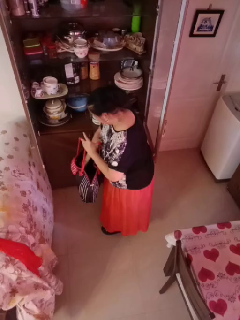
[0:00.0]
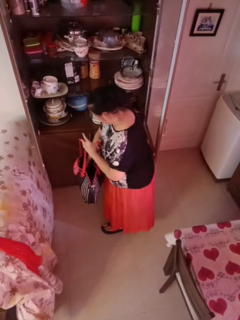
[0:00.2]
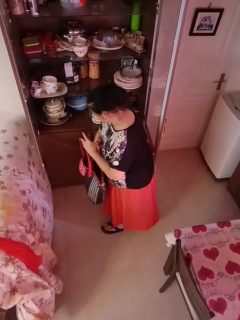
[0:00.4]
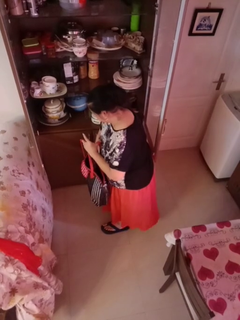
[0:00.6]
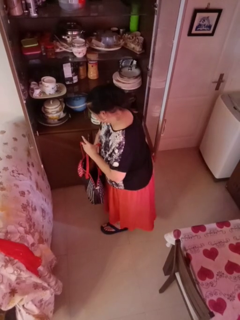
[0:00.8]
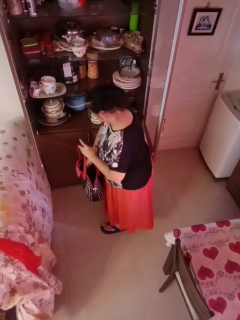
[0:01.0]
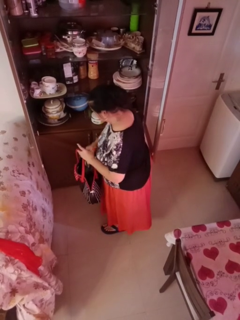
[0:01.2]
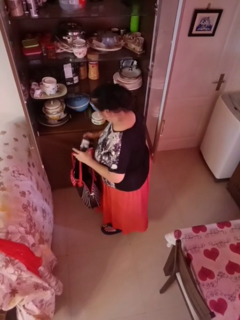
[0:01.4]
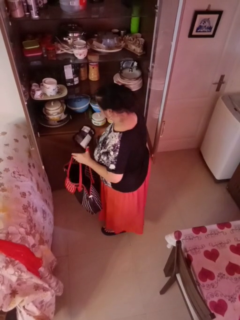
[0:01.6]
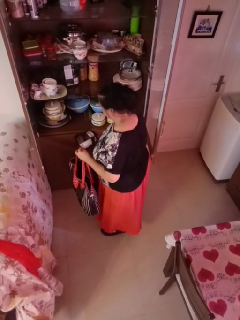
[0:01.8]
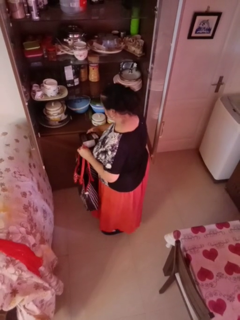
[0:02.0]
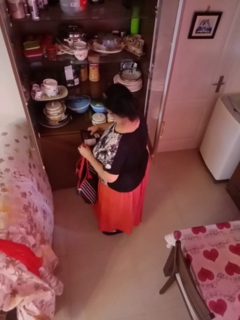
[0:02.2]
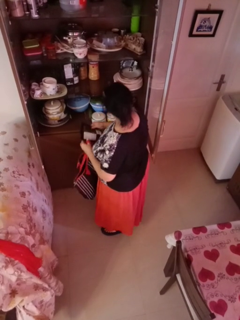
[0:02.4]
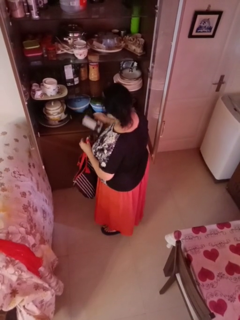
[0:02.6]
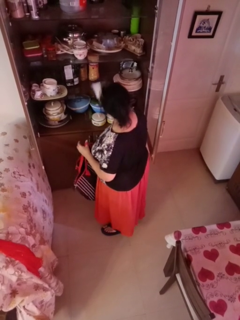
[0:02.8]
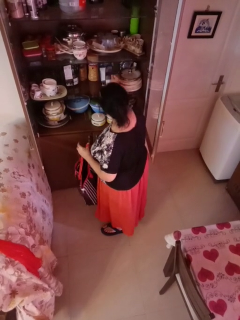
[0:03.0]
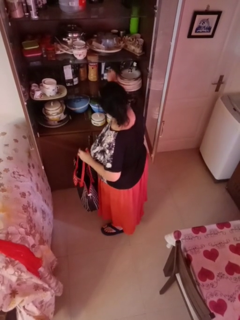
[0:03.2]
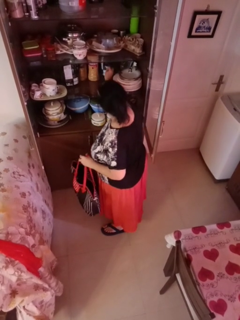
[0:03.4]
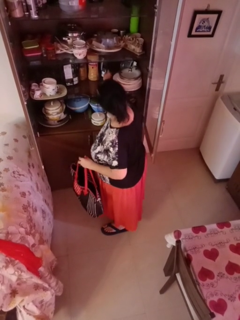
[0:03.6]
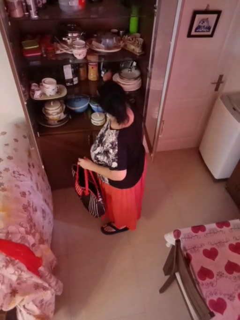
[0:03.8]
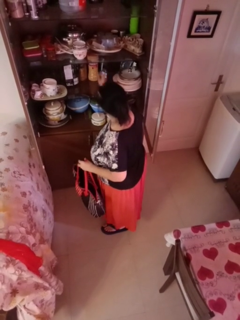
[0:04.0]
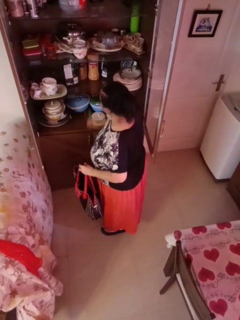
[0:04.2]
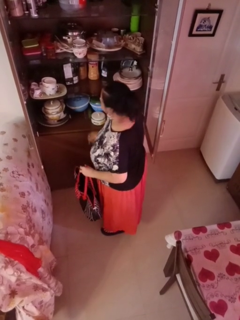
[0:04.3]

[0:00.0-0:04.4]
person loads groceries into cabinet

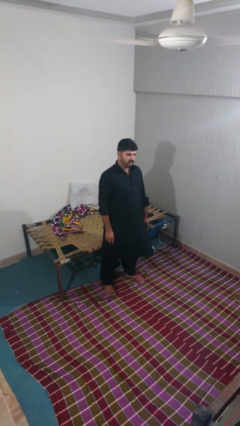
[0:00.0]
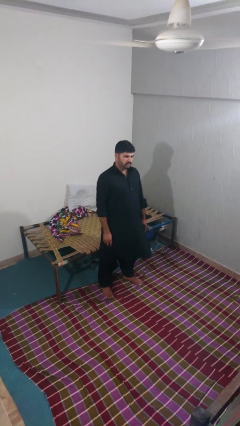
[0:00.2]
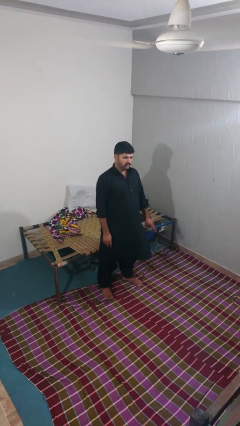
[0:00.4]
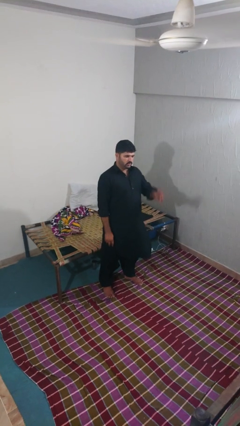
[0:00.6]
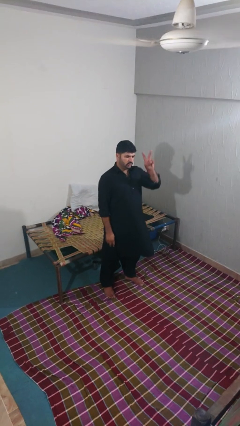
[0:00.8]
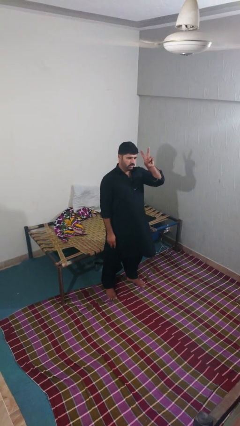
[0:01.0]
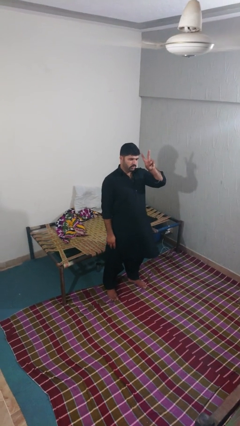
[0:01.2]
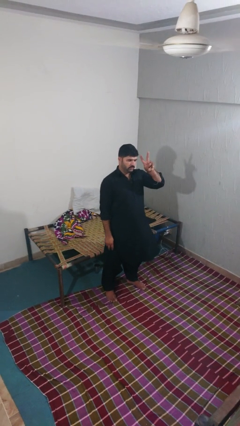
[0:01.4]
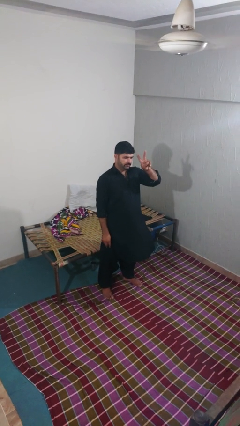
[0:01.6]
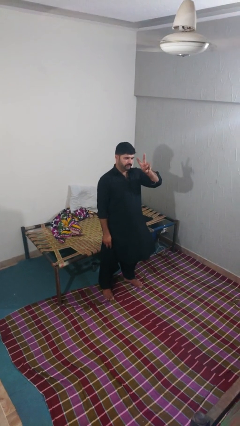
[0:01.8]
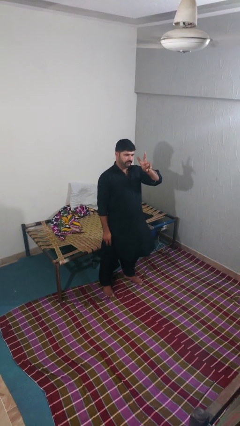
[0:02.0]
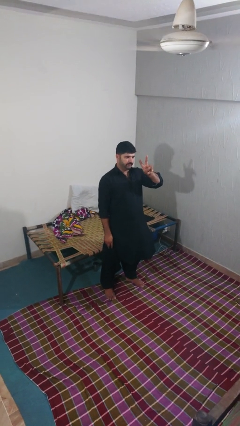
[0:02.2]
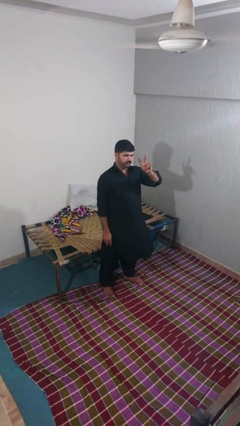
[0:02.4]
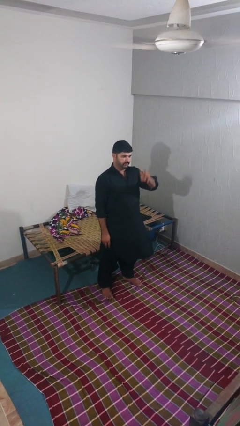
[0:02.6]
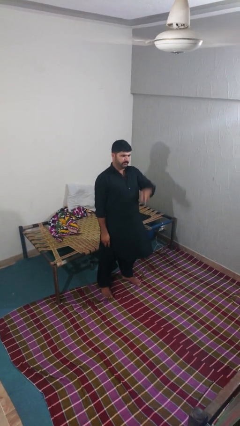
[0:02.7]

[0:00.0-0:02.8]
person gestures peace

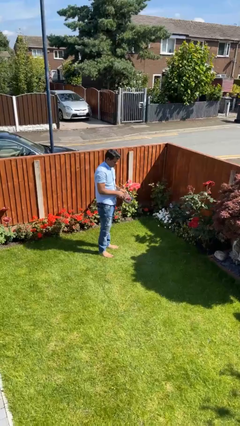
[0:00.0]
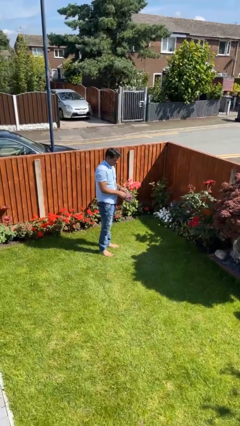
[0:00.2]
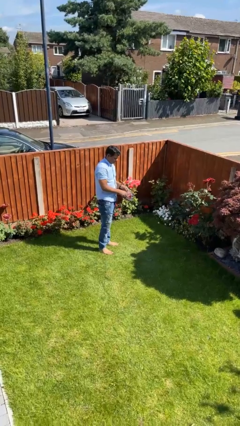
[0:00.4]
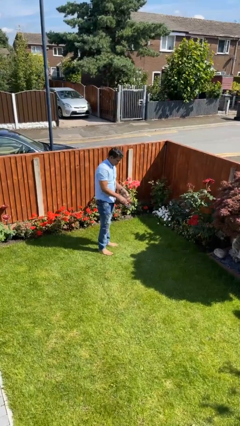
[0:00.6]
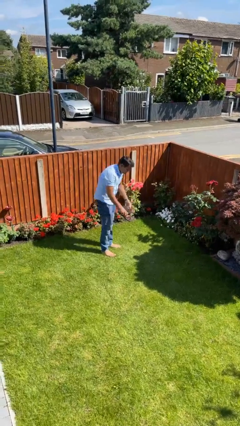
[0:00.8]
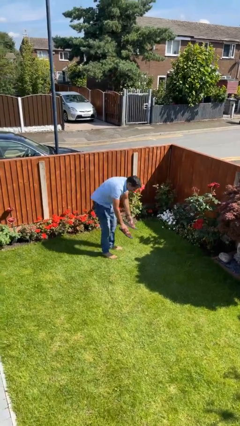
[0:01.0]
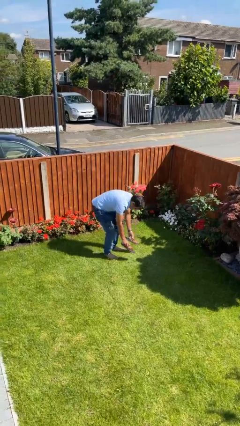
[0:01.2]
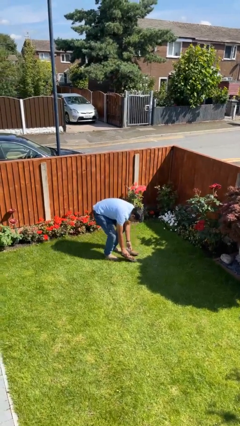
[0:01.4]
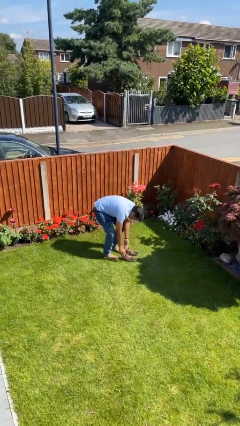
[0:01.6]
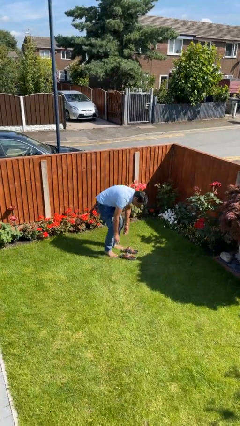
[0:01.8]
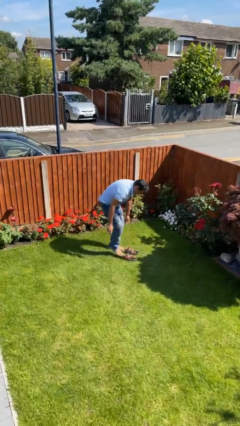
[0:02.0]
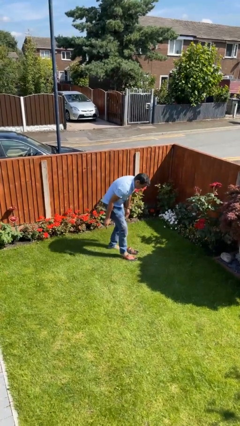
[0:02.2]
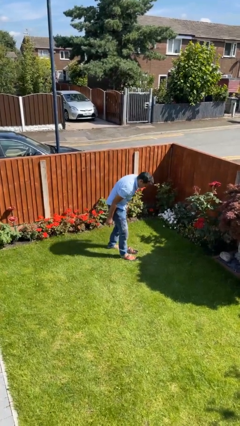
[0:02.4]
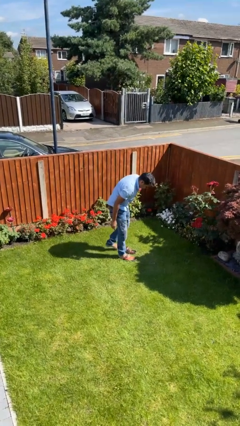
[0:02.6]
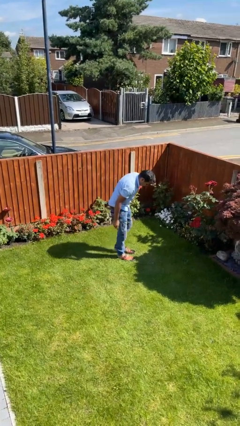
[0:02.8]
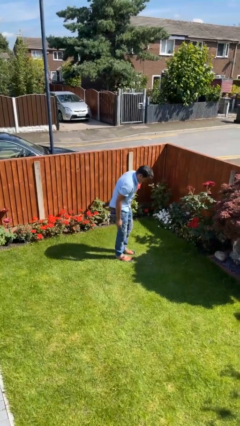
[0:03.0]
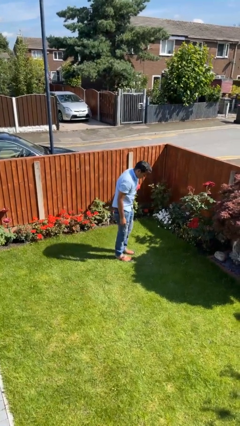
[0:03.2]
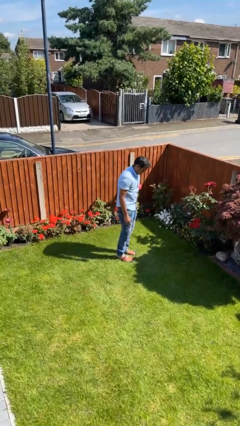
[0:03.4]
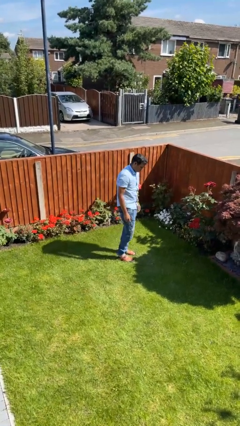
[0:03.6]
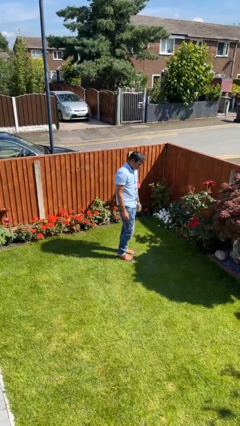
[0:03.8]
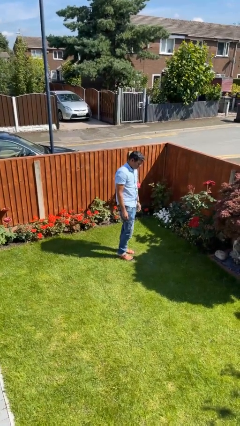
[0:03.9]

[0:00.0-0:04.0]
person puts on shoes

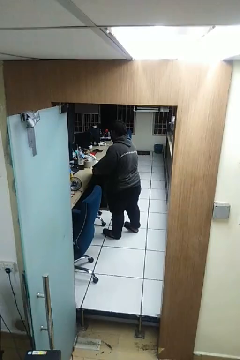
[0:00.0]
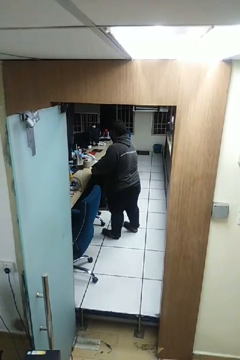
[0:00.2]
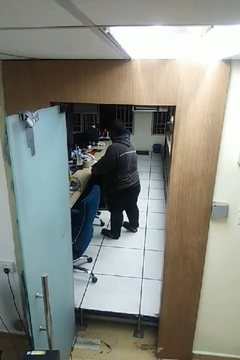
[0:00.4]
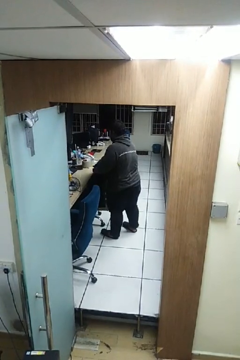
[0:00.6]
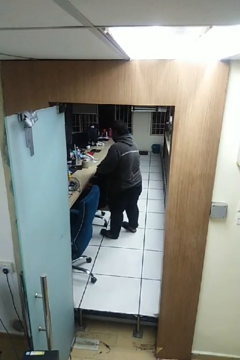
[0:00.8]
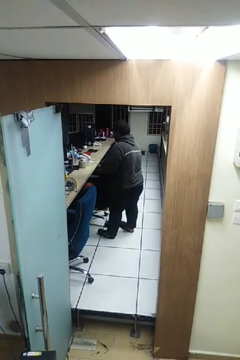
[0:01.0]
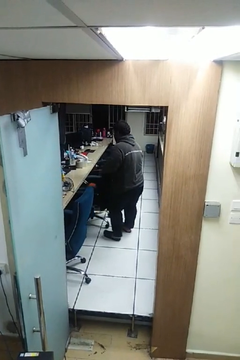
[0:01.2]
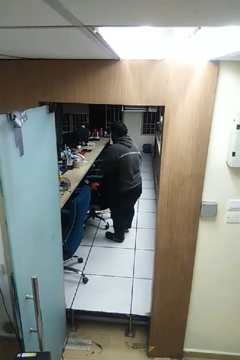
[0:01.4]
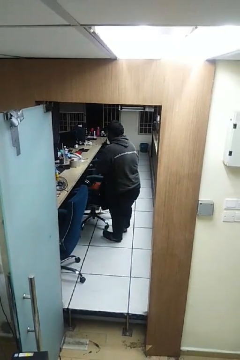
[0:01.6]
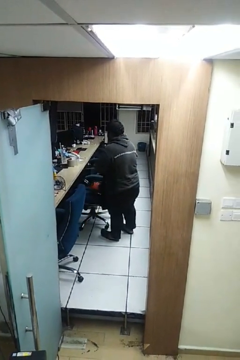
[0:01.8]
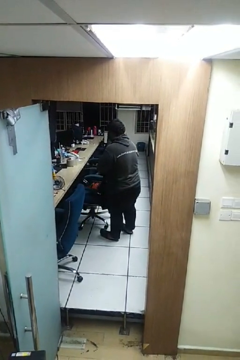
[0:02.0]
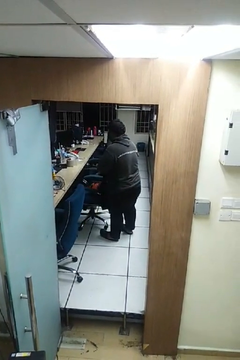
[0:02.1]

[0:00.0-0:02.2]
person pulls out chair

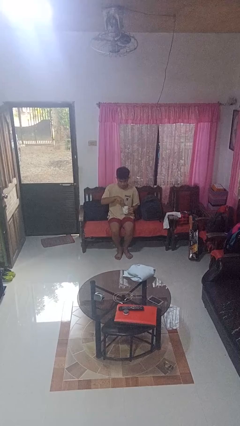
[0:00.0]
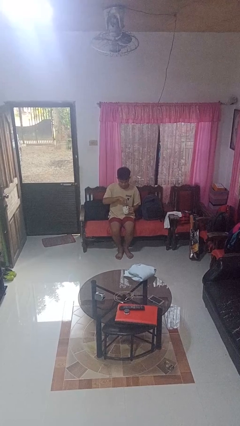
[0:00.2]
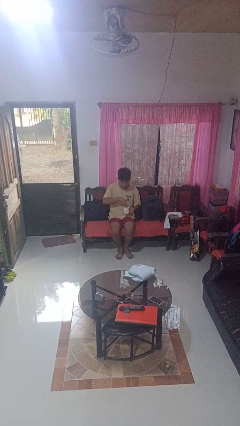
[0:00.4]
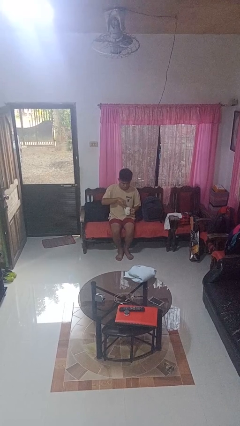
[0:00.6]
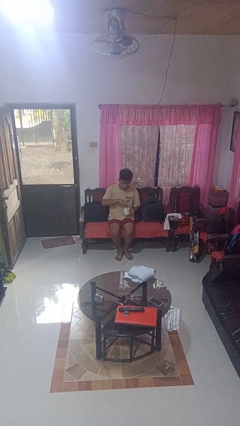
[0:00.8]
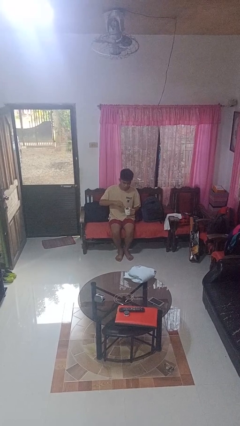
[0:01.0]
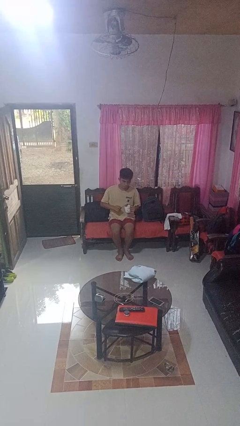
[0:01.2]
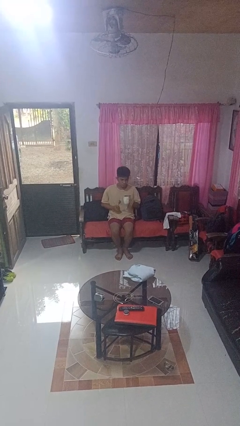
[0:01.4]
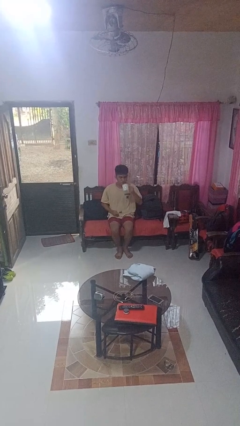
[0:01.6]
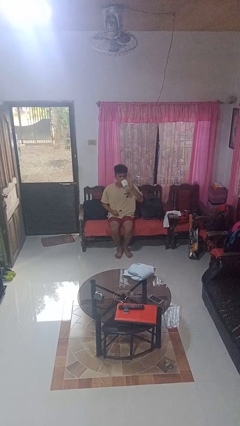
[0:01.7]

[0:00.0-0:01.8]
person stirs mug

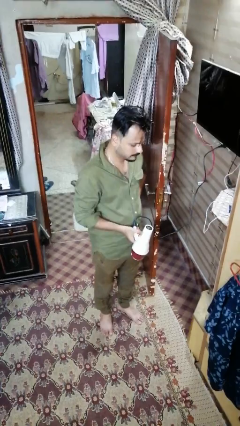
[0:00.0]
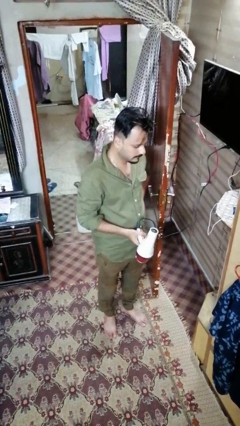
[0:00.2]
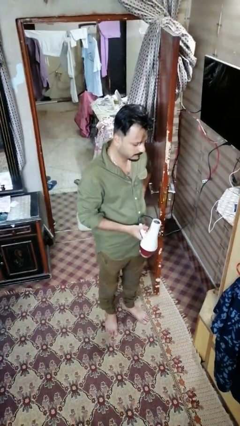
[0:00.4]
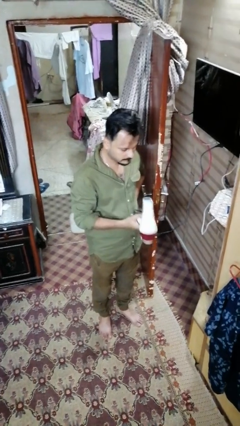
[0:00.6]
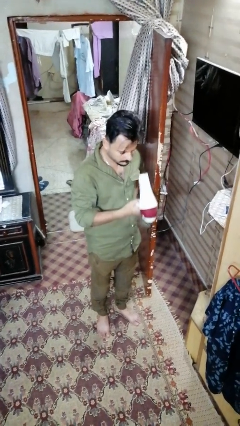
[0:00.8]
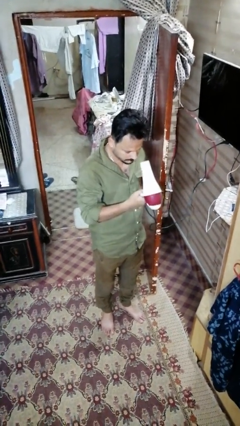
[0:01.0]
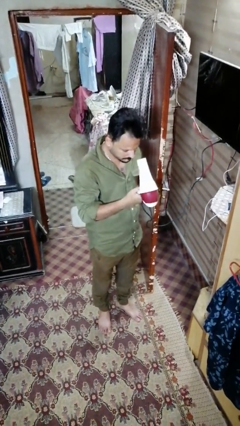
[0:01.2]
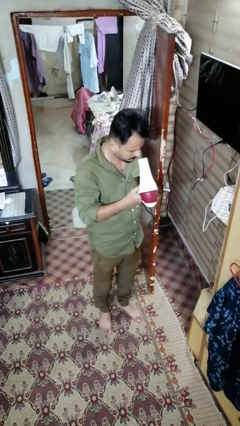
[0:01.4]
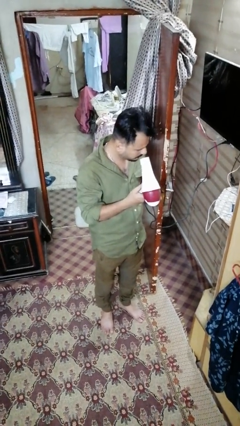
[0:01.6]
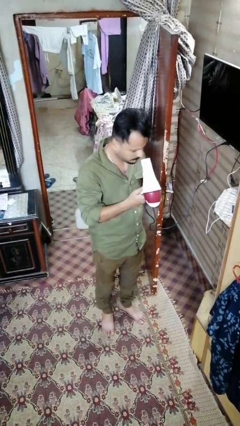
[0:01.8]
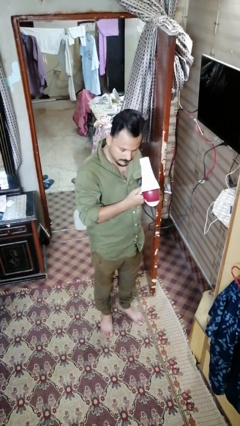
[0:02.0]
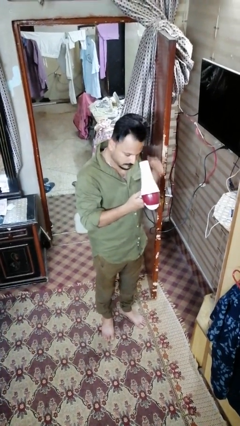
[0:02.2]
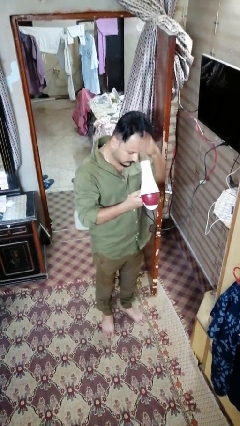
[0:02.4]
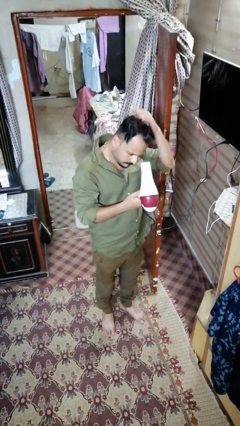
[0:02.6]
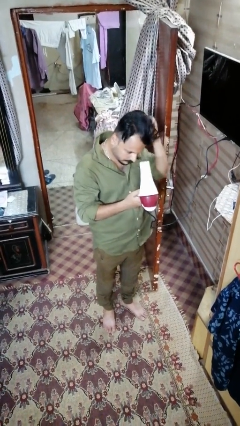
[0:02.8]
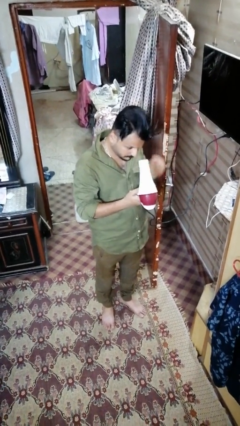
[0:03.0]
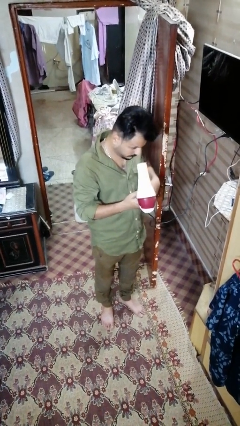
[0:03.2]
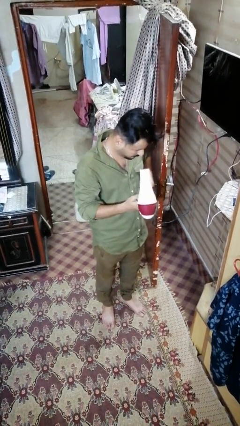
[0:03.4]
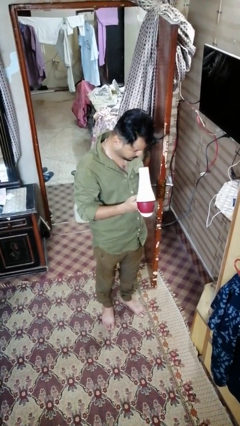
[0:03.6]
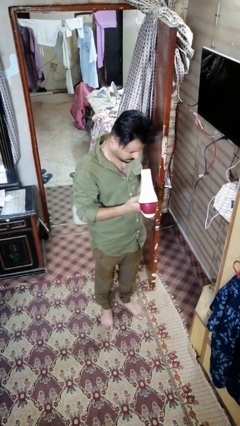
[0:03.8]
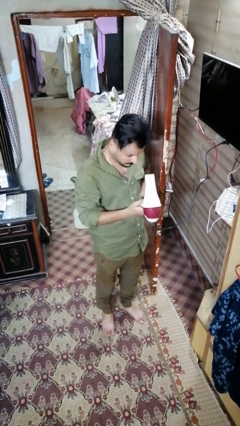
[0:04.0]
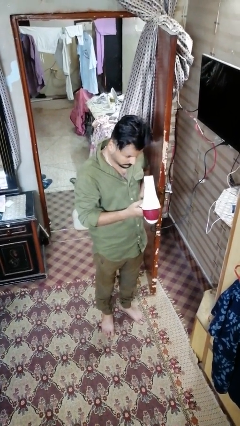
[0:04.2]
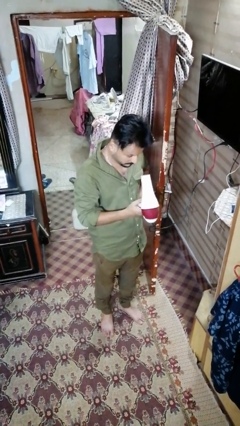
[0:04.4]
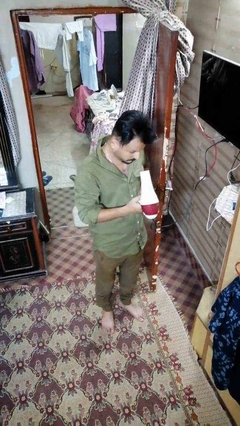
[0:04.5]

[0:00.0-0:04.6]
person dries hair with hairdryer
